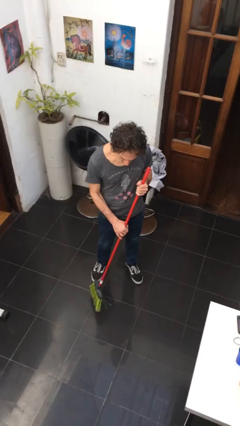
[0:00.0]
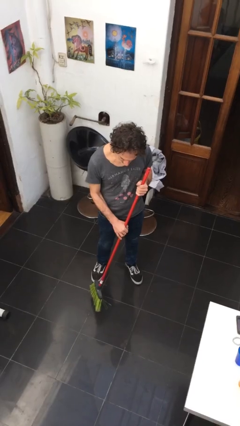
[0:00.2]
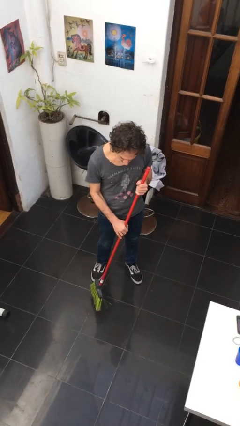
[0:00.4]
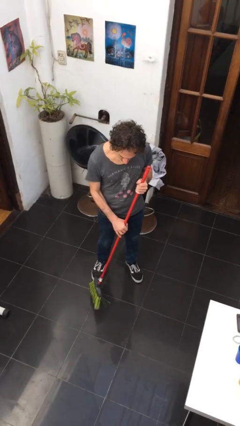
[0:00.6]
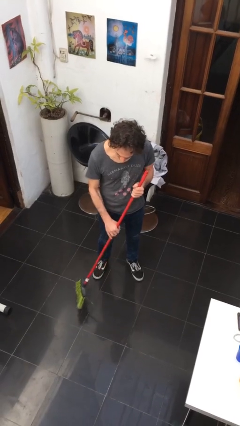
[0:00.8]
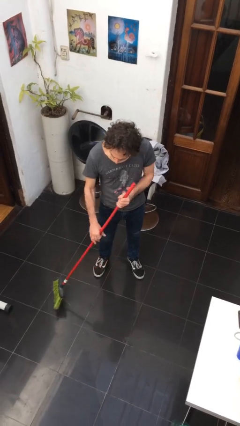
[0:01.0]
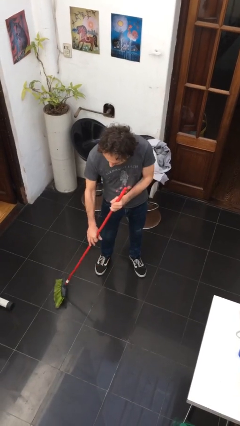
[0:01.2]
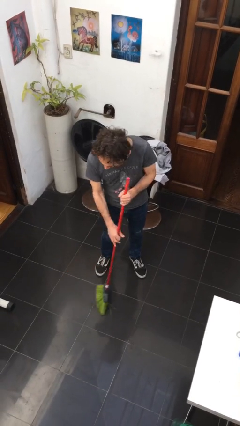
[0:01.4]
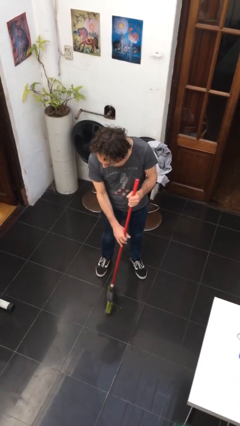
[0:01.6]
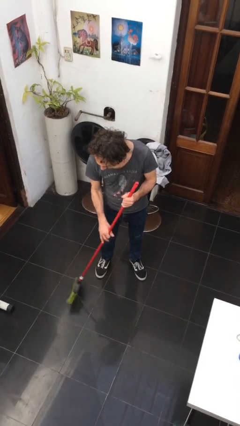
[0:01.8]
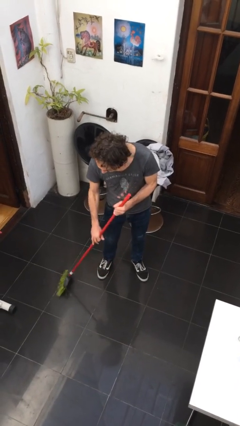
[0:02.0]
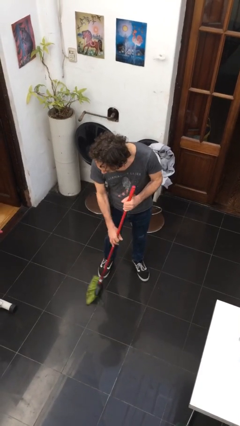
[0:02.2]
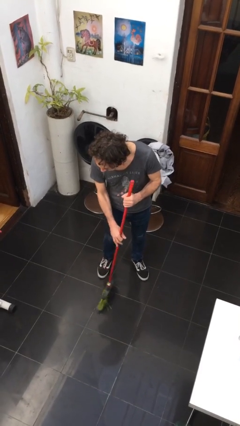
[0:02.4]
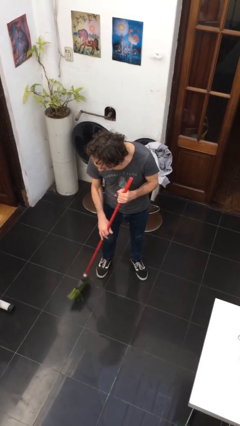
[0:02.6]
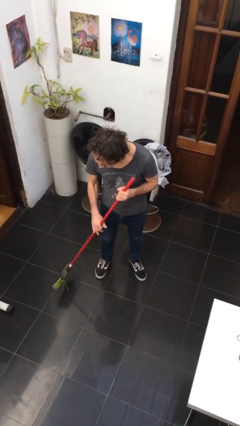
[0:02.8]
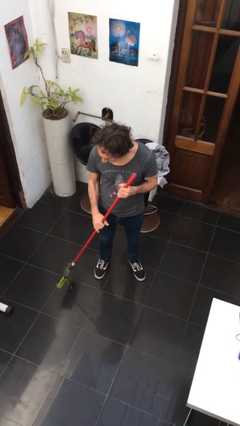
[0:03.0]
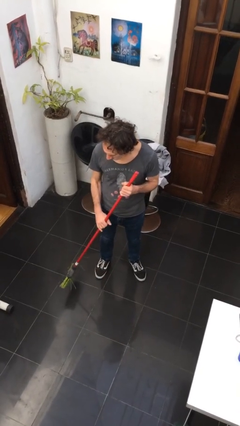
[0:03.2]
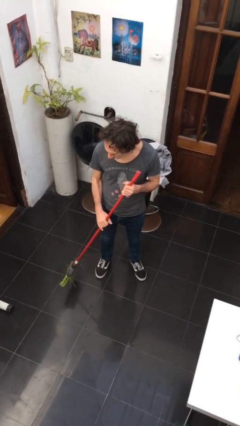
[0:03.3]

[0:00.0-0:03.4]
person sweeps floor

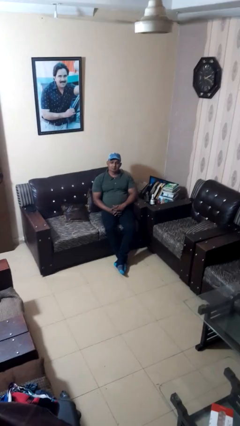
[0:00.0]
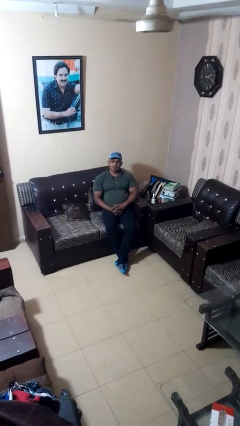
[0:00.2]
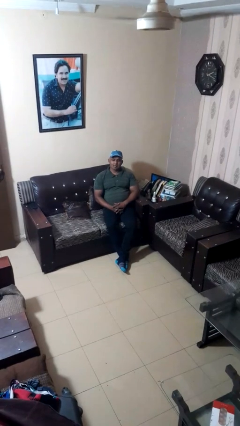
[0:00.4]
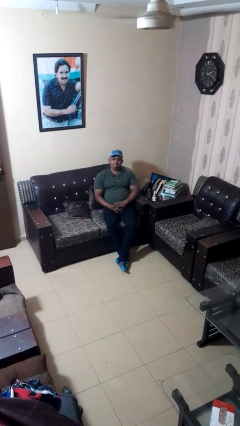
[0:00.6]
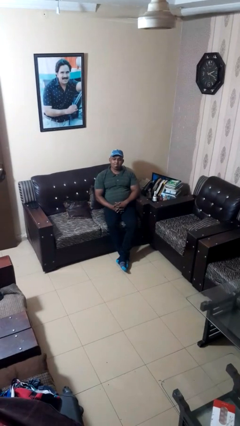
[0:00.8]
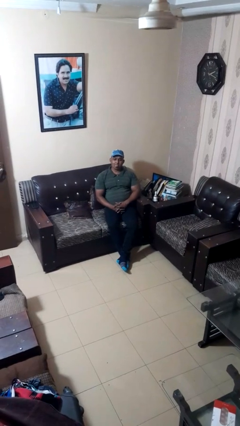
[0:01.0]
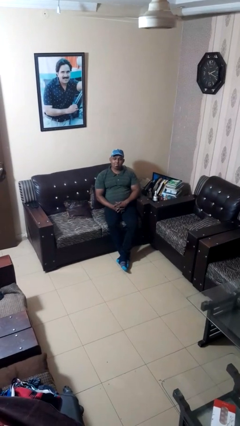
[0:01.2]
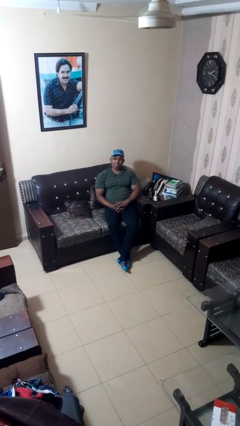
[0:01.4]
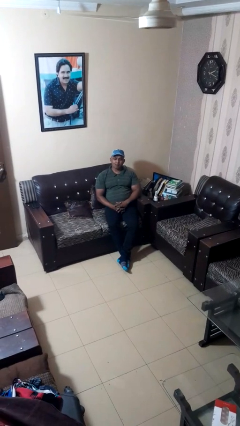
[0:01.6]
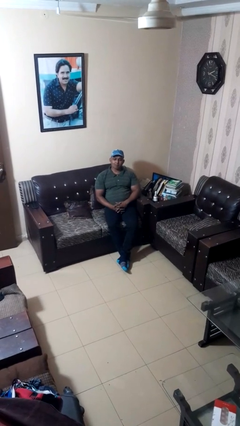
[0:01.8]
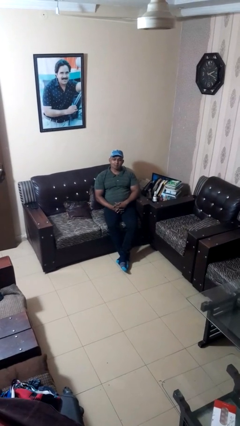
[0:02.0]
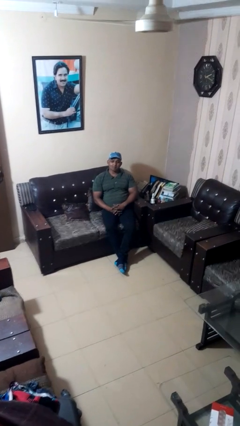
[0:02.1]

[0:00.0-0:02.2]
person sticks out tongue

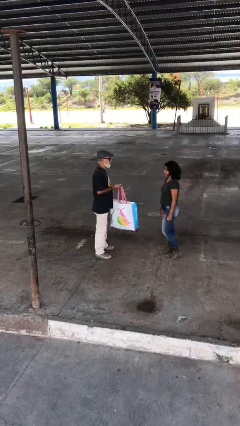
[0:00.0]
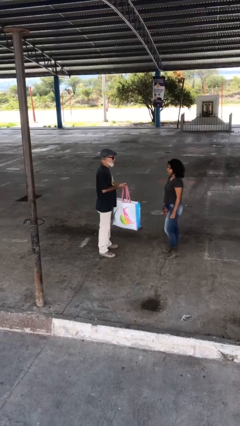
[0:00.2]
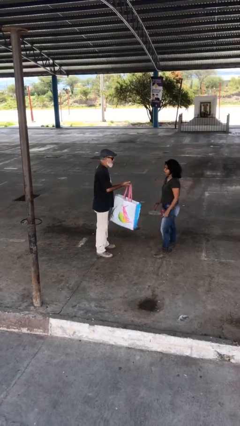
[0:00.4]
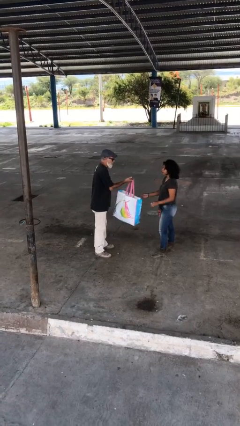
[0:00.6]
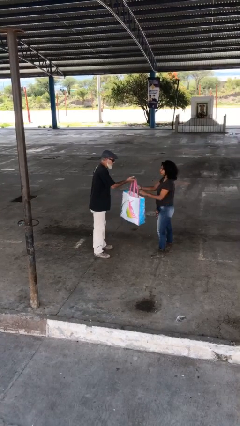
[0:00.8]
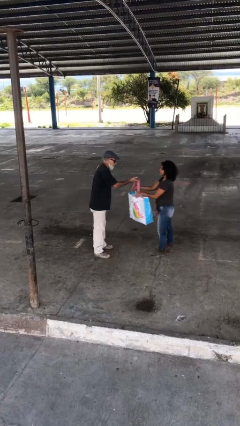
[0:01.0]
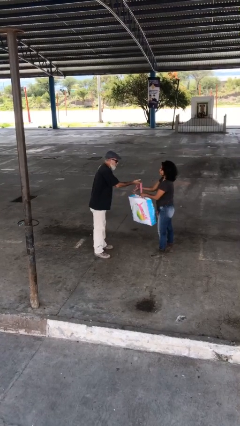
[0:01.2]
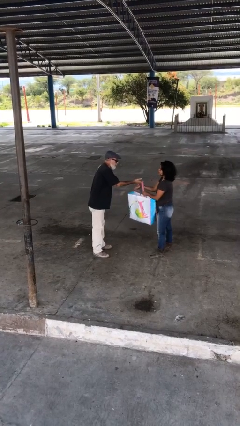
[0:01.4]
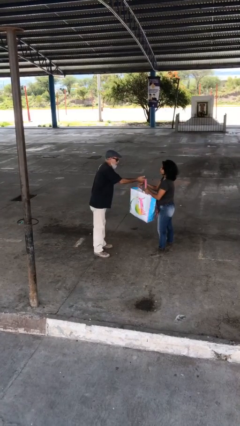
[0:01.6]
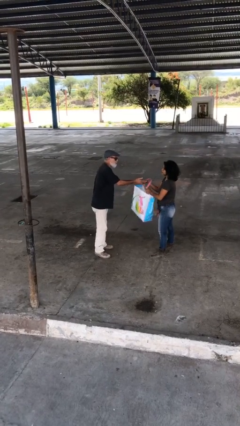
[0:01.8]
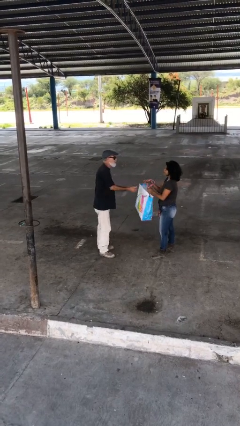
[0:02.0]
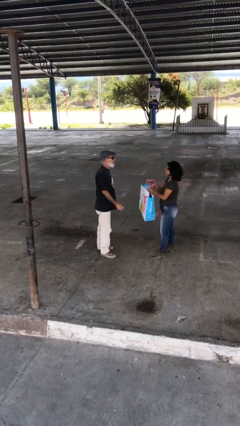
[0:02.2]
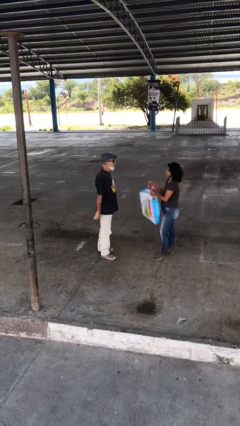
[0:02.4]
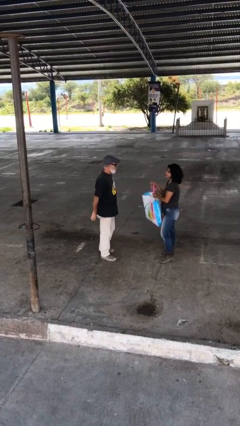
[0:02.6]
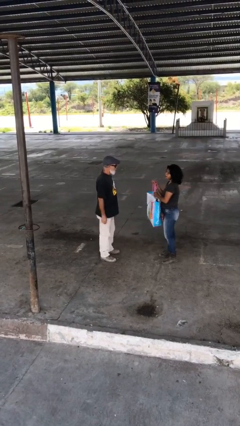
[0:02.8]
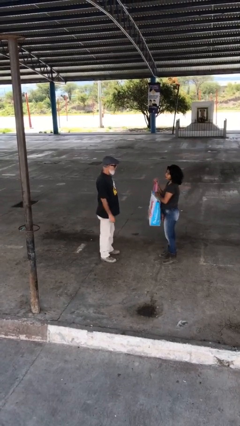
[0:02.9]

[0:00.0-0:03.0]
person transfers object to person

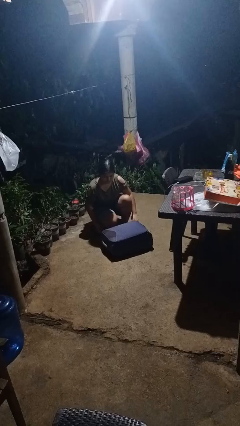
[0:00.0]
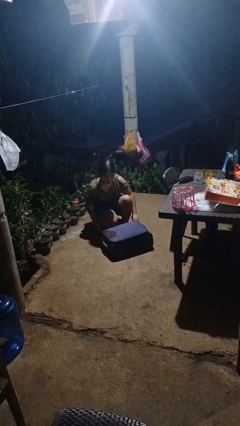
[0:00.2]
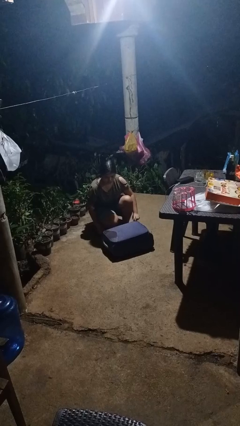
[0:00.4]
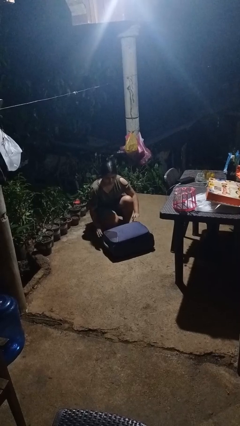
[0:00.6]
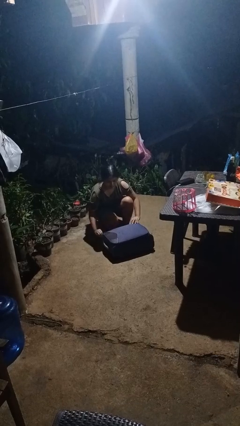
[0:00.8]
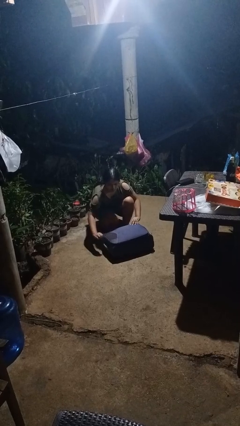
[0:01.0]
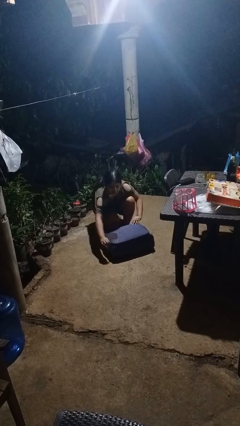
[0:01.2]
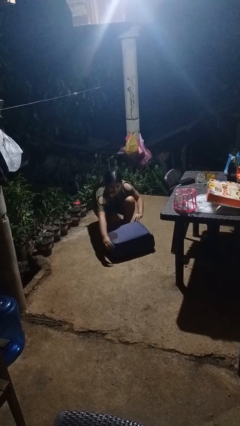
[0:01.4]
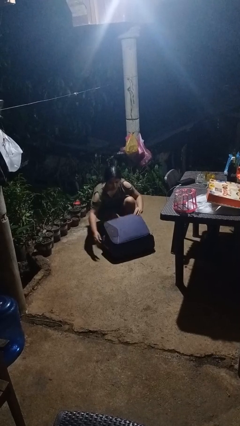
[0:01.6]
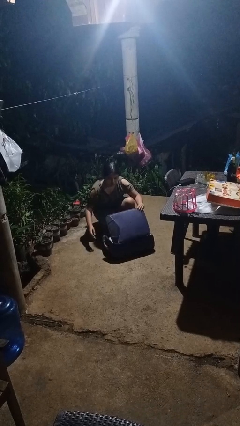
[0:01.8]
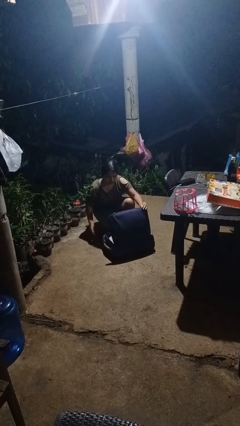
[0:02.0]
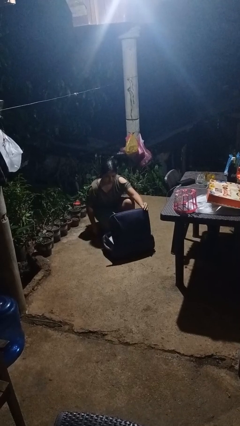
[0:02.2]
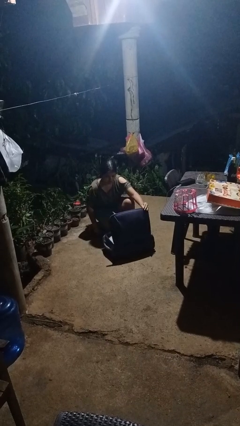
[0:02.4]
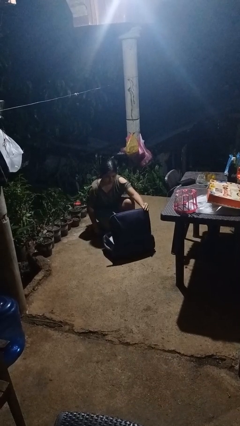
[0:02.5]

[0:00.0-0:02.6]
person opens suitcase

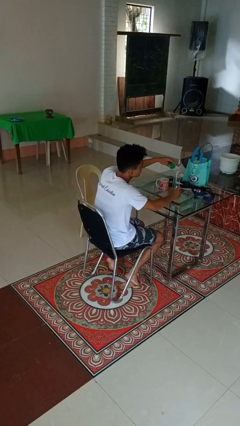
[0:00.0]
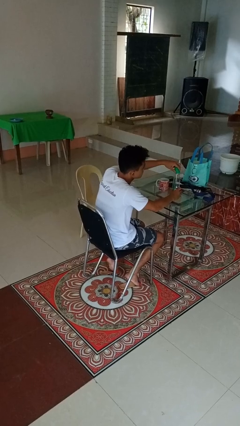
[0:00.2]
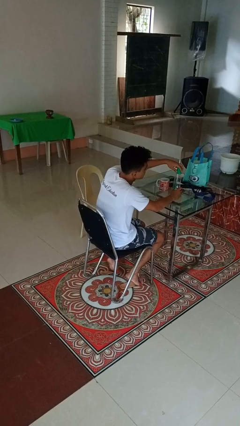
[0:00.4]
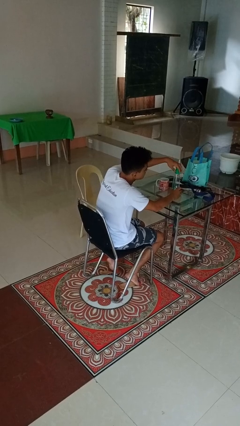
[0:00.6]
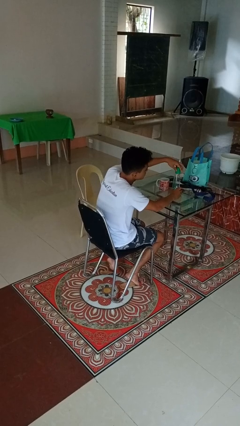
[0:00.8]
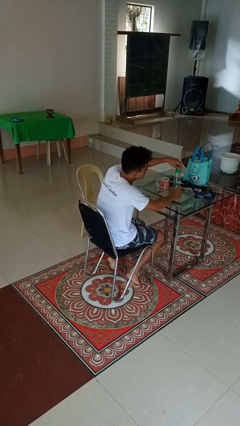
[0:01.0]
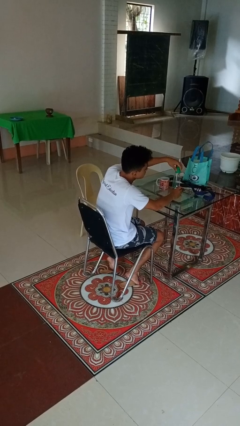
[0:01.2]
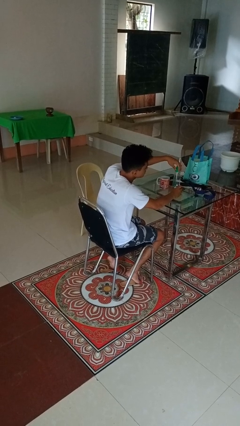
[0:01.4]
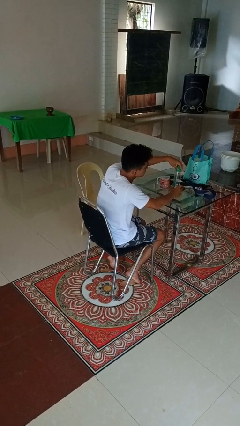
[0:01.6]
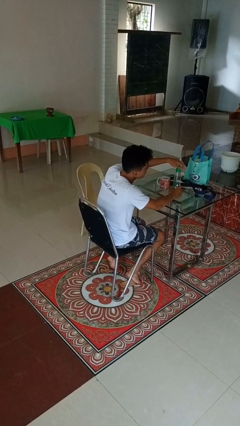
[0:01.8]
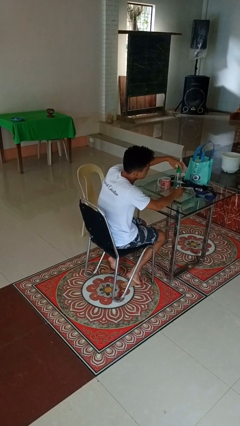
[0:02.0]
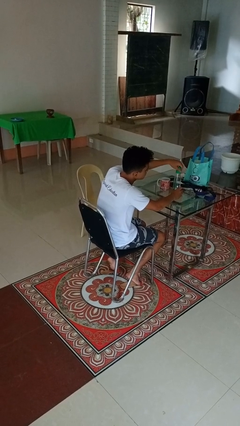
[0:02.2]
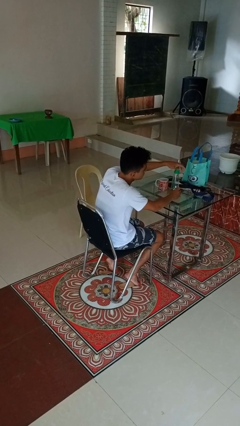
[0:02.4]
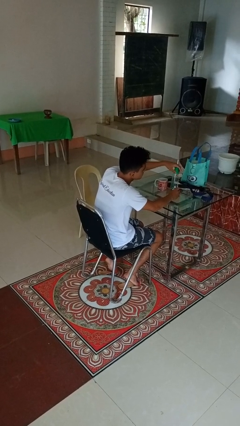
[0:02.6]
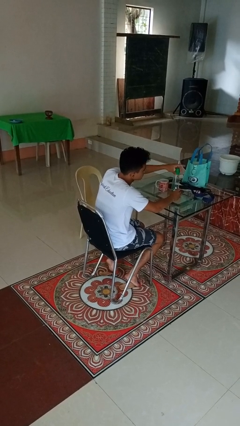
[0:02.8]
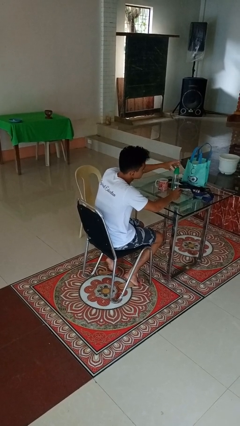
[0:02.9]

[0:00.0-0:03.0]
person screws lid to bottle

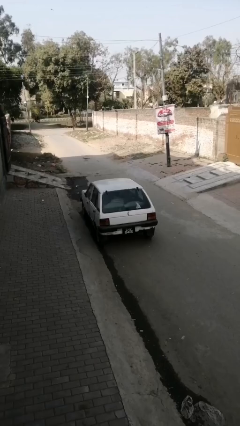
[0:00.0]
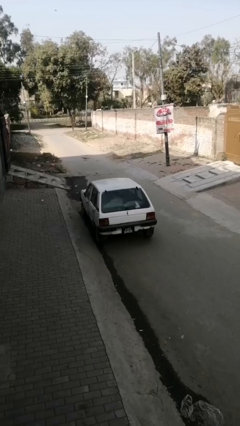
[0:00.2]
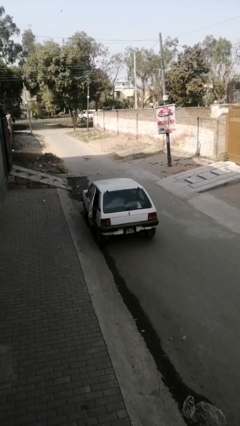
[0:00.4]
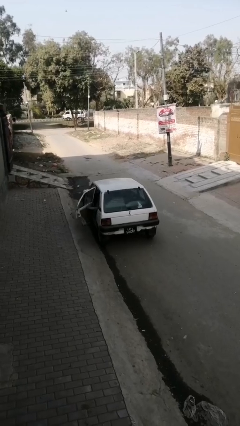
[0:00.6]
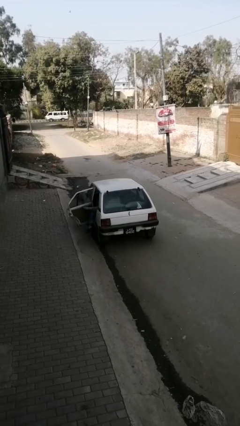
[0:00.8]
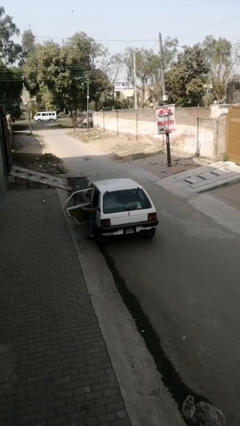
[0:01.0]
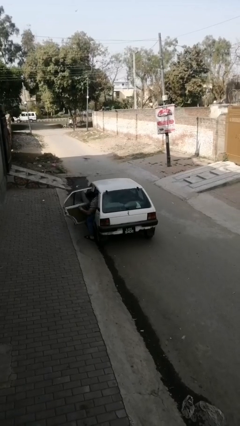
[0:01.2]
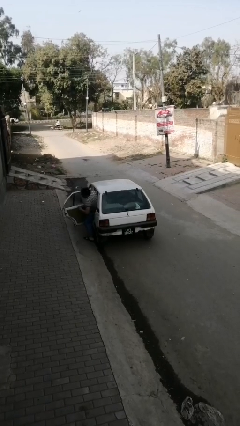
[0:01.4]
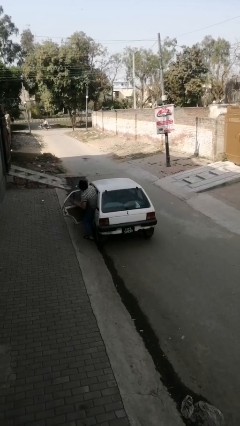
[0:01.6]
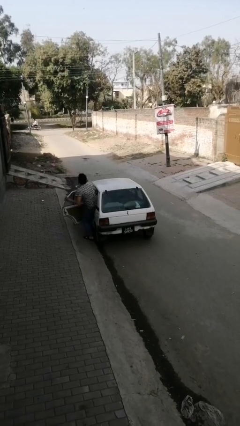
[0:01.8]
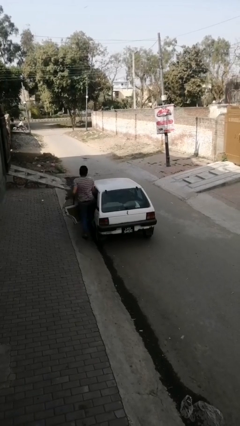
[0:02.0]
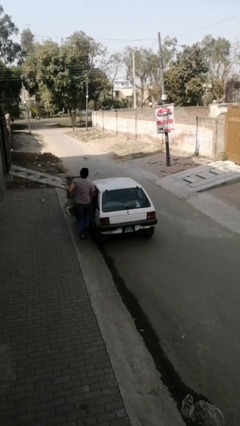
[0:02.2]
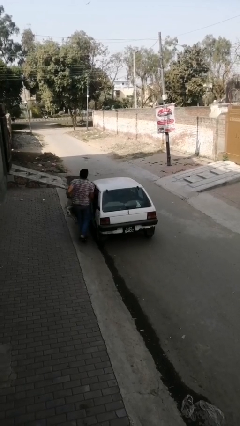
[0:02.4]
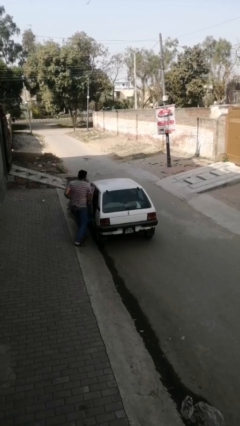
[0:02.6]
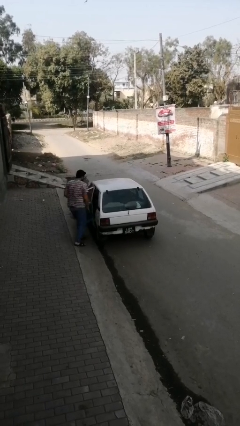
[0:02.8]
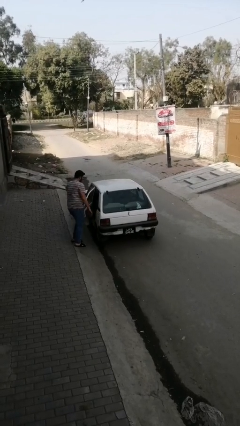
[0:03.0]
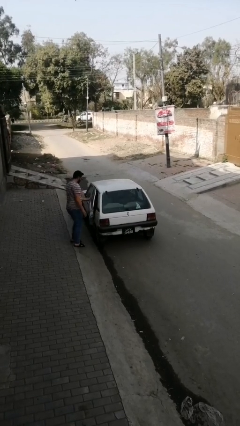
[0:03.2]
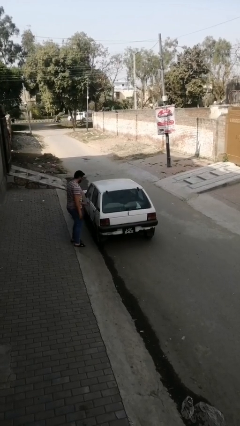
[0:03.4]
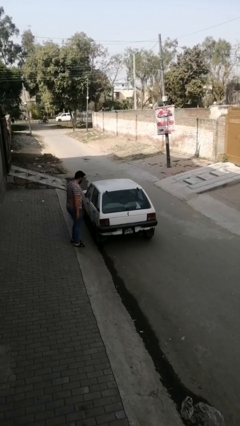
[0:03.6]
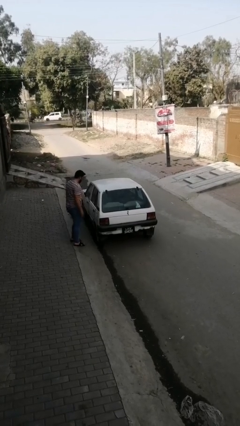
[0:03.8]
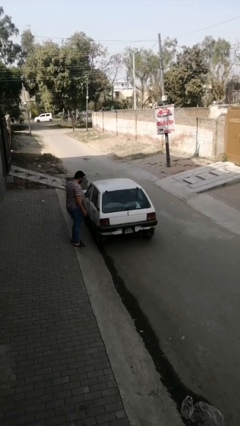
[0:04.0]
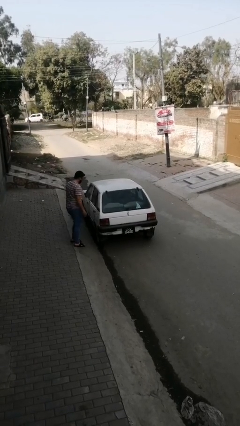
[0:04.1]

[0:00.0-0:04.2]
car drops off person
